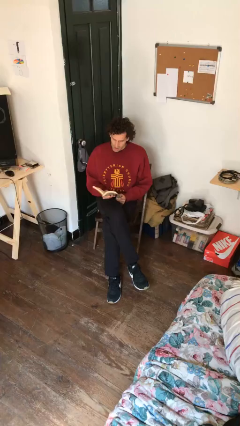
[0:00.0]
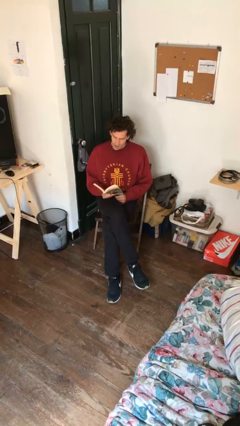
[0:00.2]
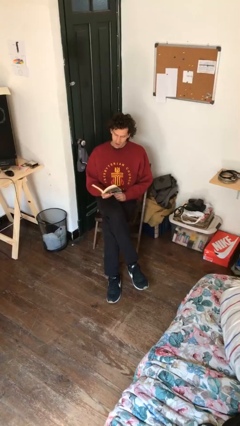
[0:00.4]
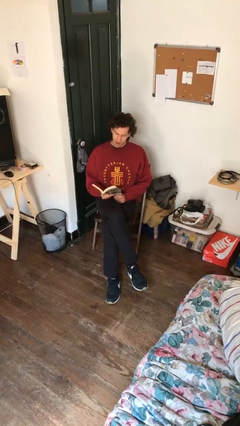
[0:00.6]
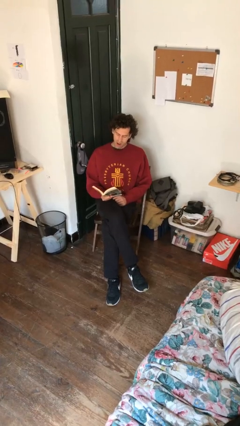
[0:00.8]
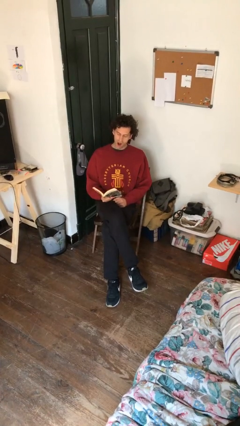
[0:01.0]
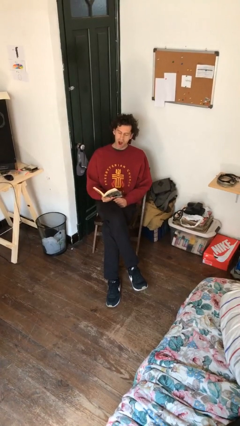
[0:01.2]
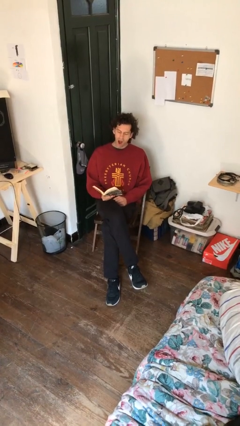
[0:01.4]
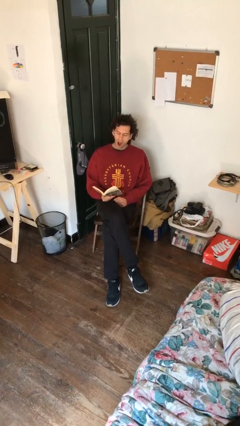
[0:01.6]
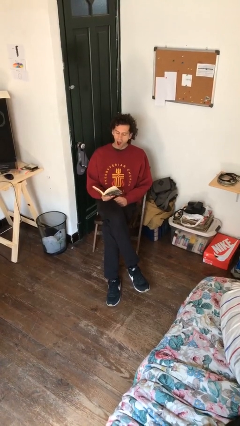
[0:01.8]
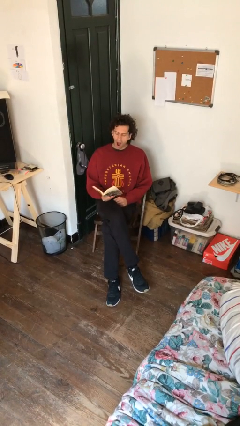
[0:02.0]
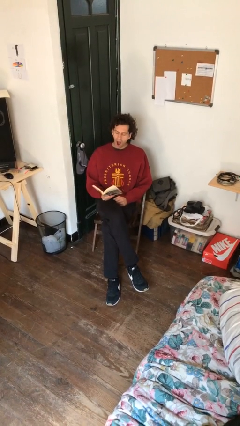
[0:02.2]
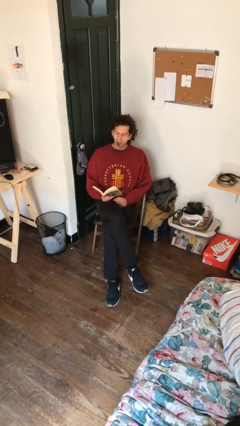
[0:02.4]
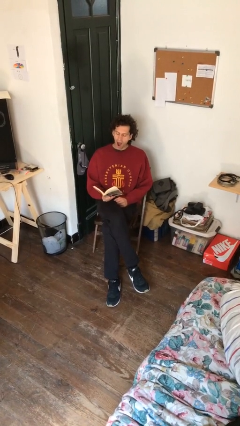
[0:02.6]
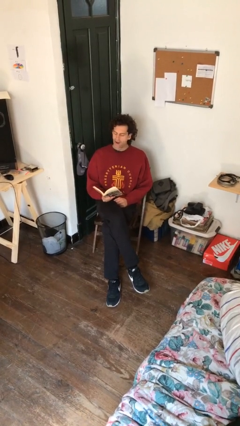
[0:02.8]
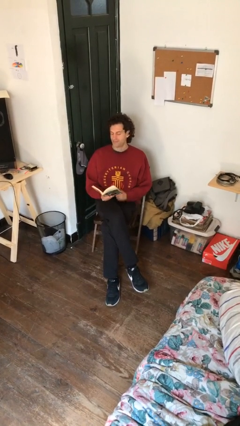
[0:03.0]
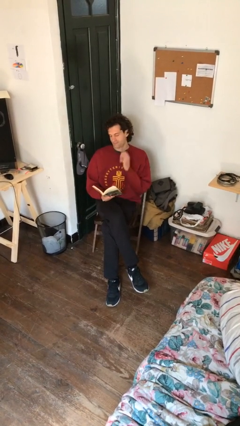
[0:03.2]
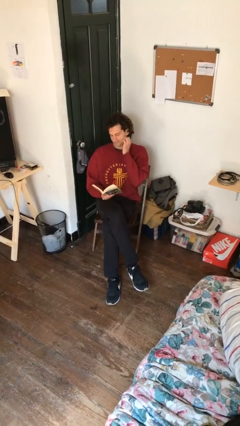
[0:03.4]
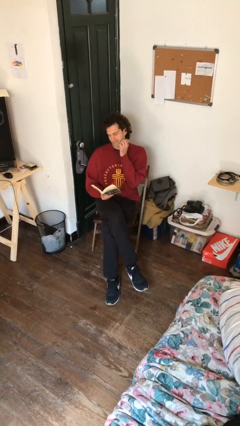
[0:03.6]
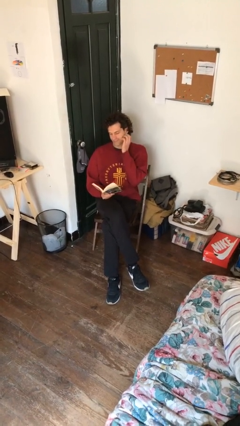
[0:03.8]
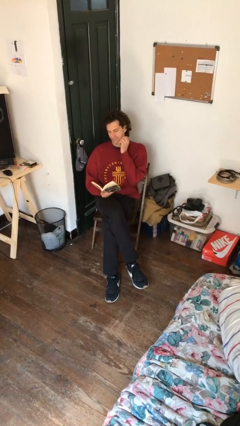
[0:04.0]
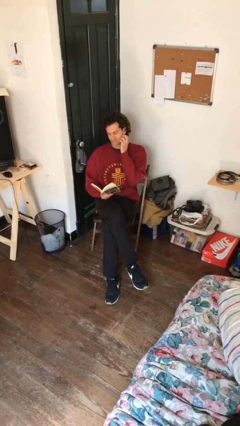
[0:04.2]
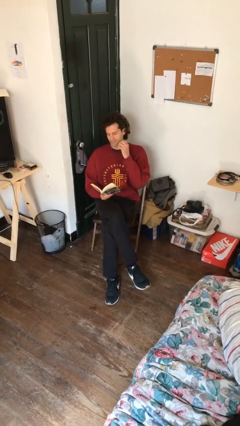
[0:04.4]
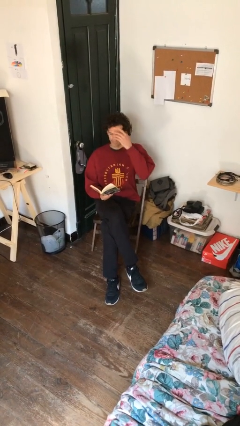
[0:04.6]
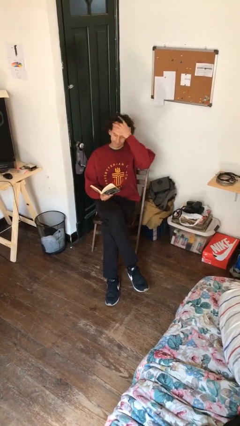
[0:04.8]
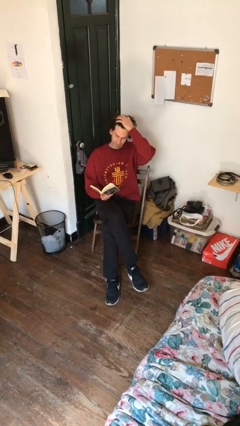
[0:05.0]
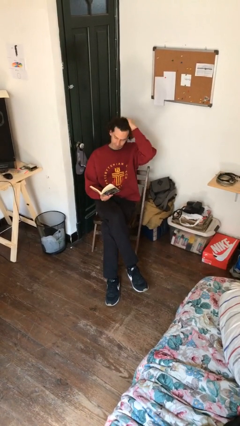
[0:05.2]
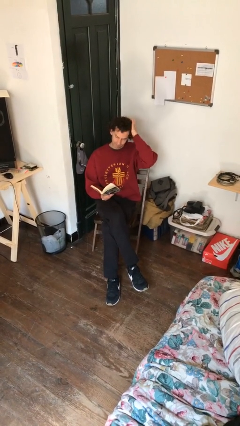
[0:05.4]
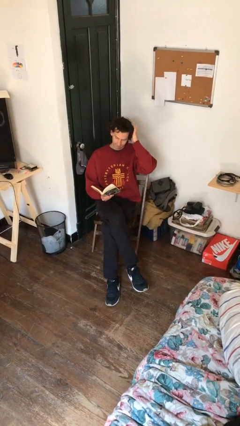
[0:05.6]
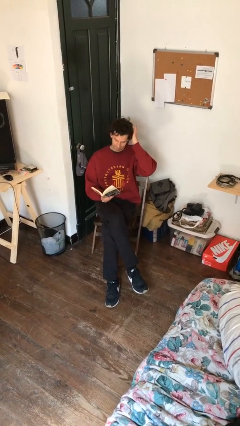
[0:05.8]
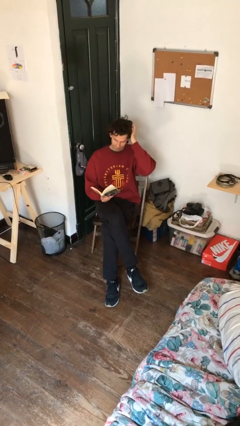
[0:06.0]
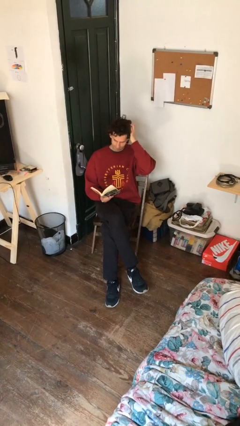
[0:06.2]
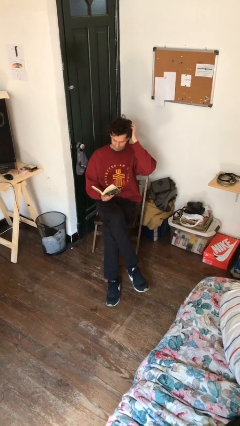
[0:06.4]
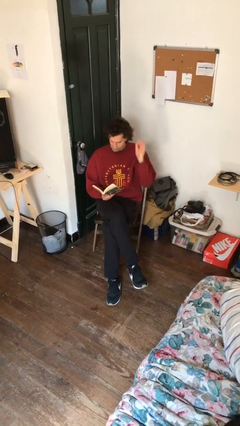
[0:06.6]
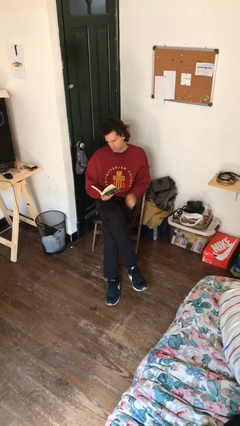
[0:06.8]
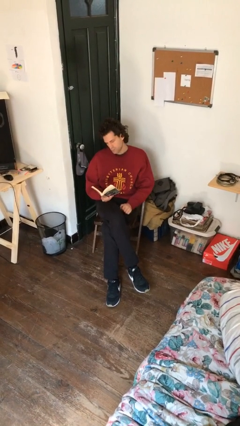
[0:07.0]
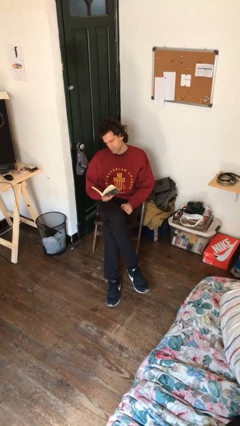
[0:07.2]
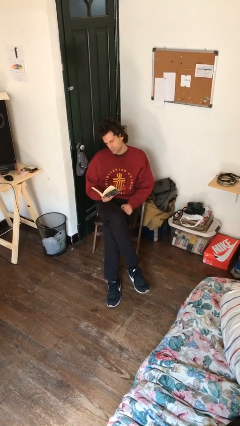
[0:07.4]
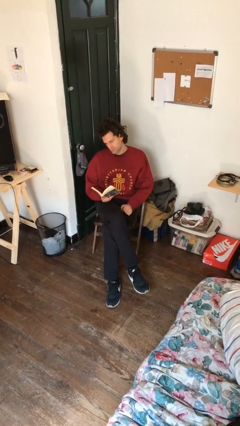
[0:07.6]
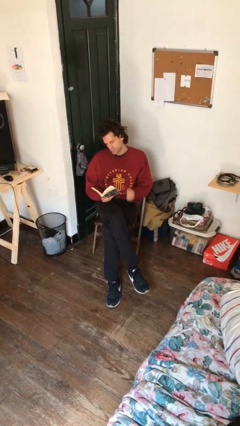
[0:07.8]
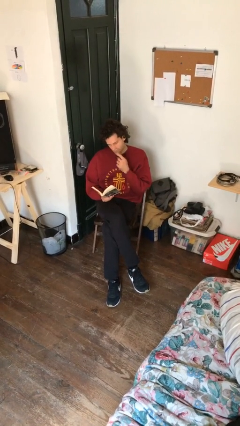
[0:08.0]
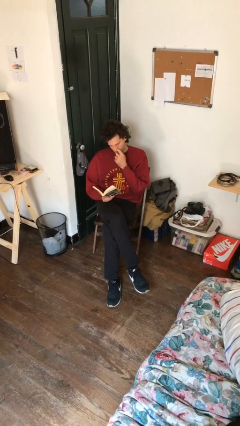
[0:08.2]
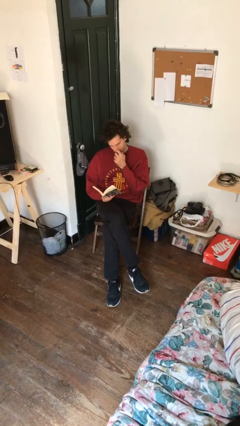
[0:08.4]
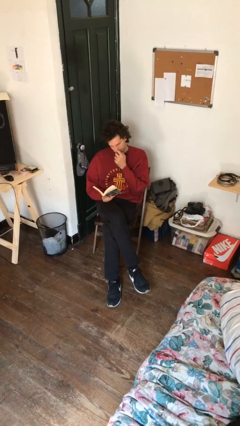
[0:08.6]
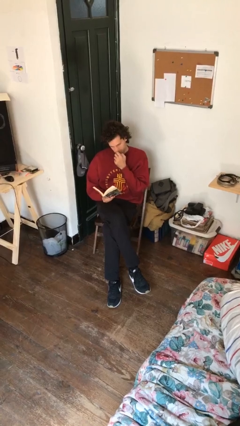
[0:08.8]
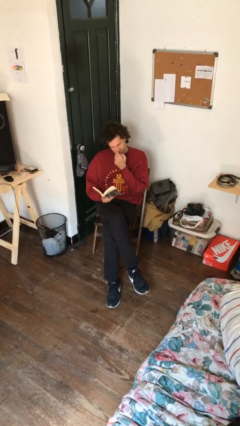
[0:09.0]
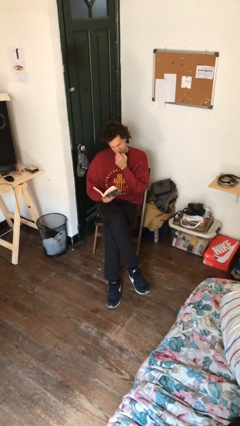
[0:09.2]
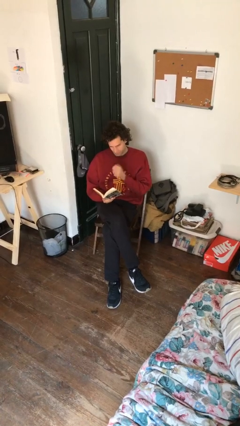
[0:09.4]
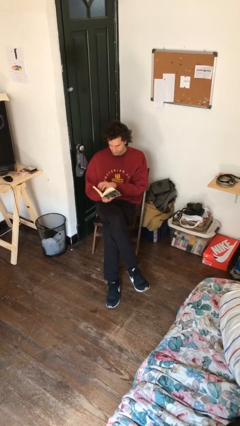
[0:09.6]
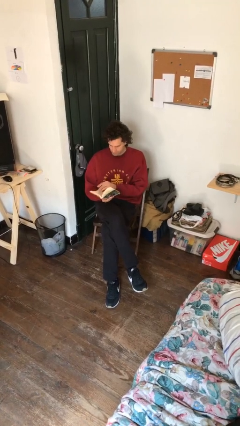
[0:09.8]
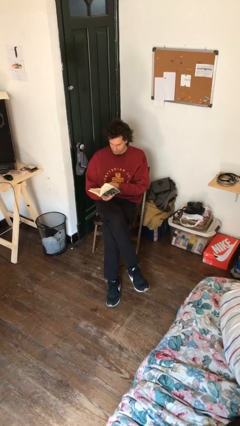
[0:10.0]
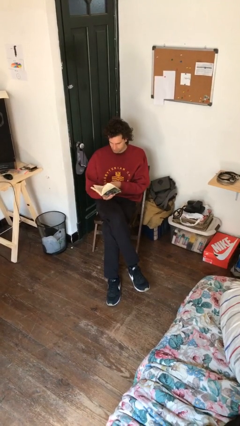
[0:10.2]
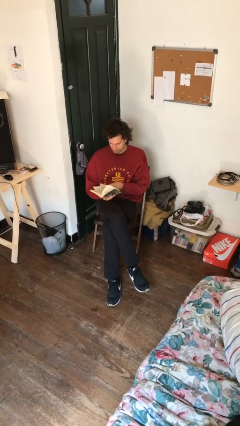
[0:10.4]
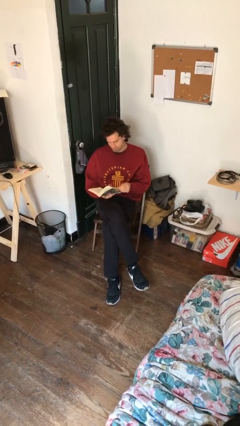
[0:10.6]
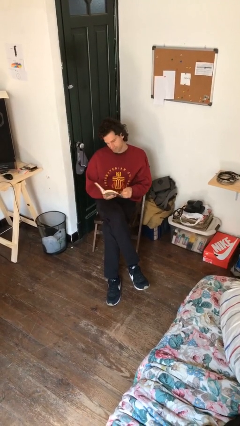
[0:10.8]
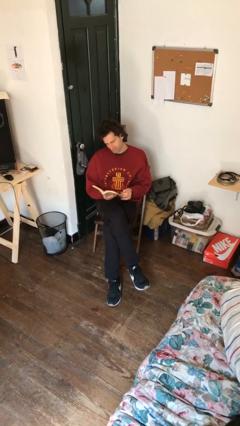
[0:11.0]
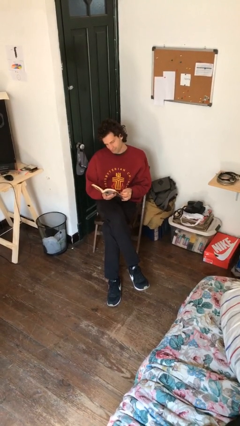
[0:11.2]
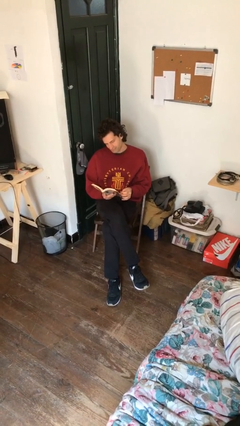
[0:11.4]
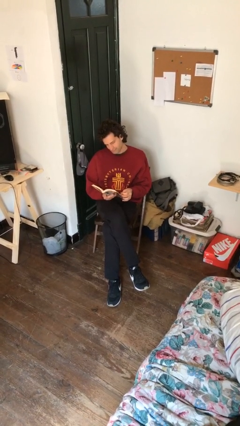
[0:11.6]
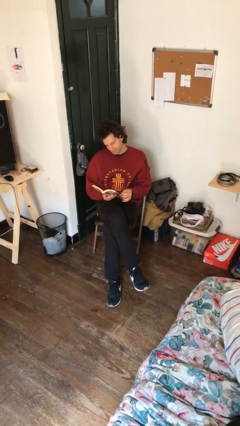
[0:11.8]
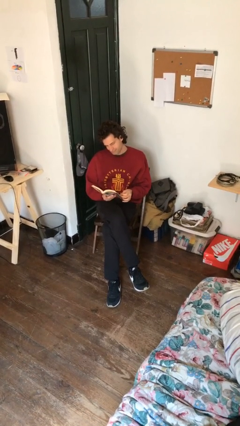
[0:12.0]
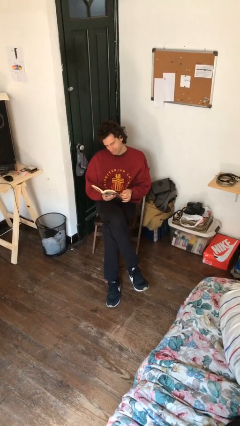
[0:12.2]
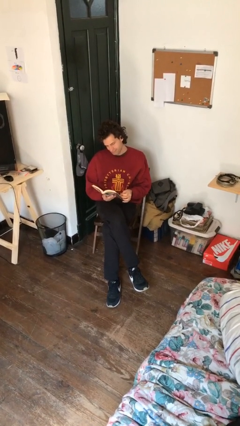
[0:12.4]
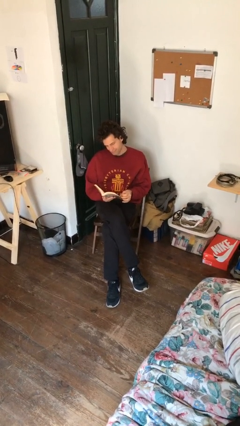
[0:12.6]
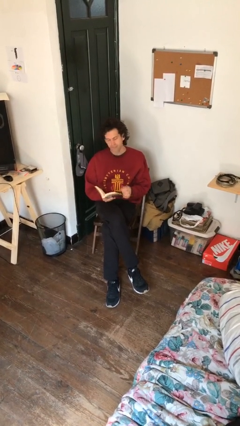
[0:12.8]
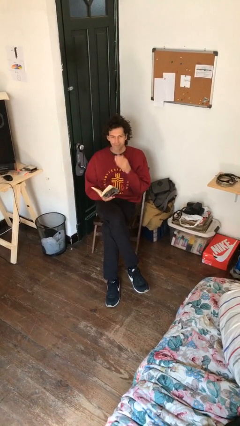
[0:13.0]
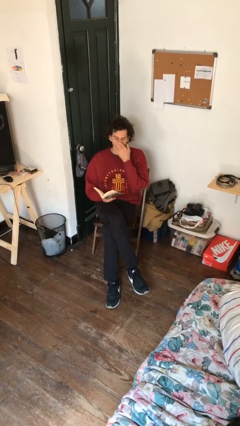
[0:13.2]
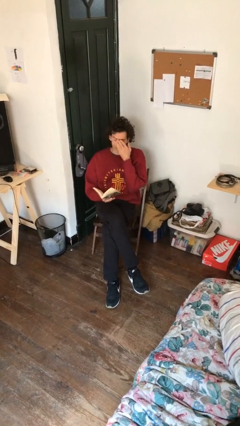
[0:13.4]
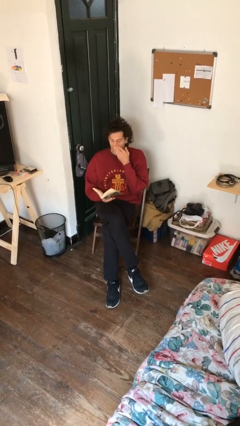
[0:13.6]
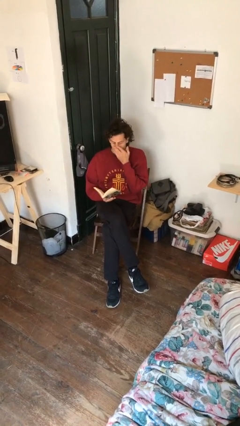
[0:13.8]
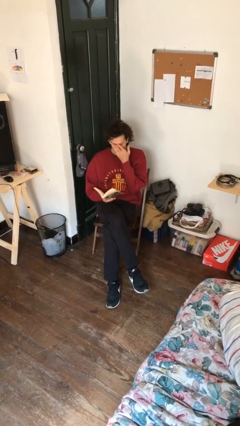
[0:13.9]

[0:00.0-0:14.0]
person reads document

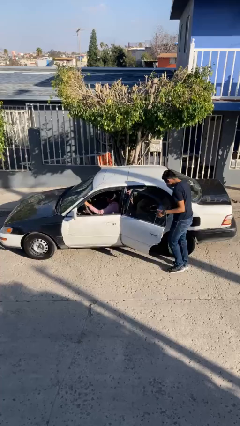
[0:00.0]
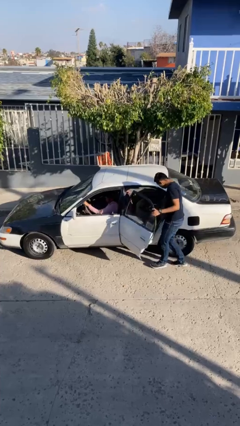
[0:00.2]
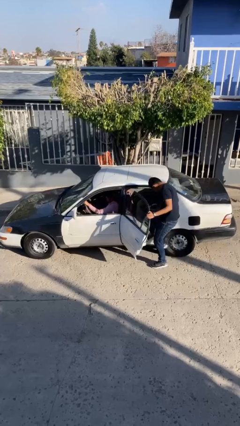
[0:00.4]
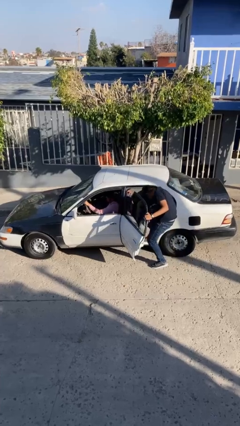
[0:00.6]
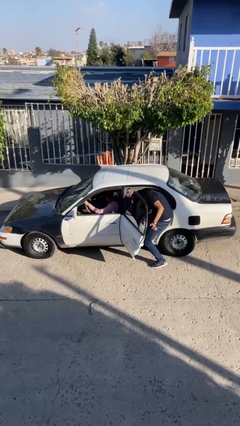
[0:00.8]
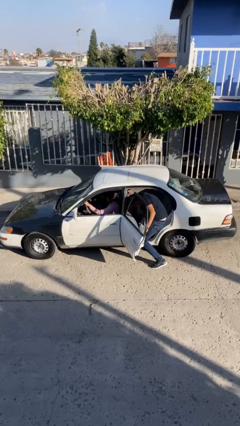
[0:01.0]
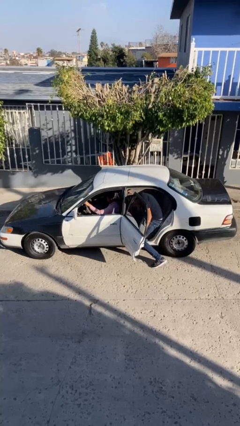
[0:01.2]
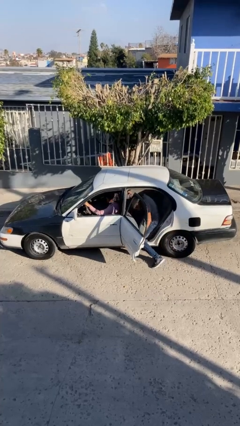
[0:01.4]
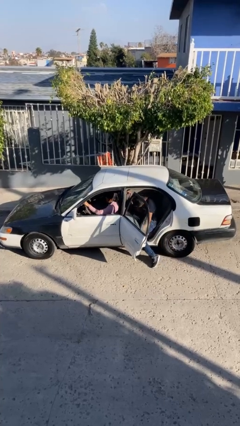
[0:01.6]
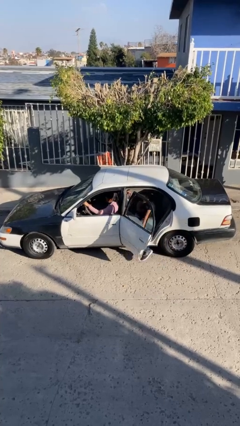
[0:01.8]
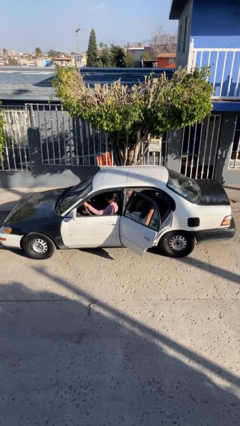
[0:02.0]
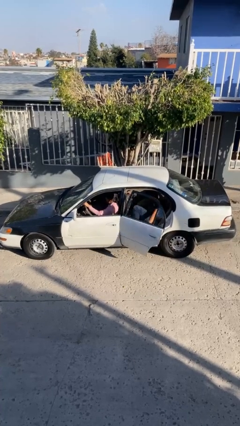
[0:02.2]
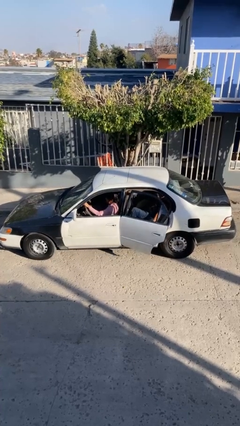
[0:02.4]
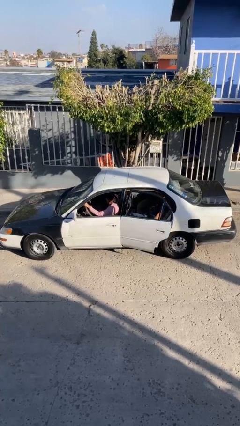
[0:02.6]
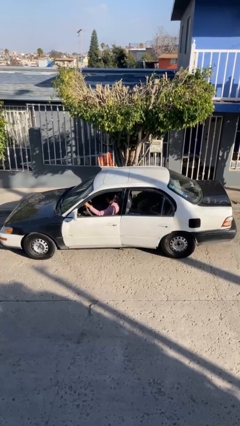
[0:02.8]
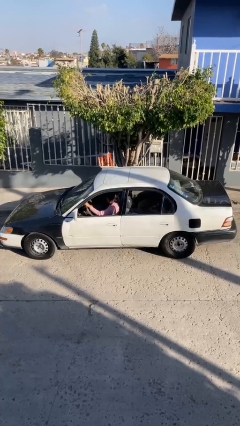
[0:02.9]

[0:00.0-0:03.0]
car picks up person

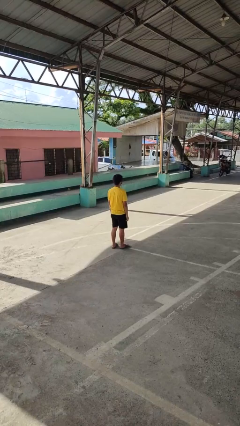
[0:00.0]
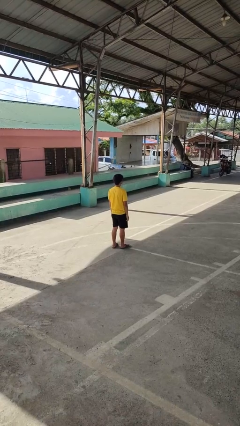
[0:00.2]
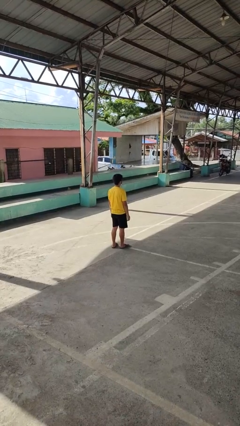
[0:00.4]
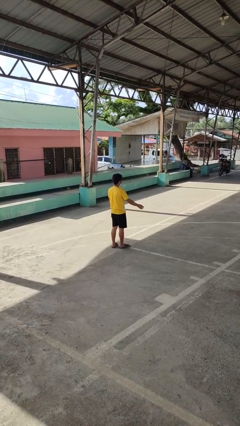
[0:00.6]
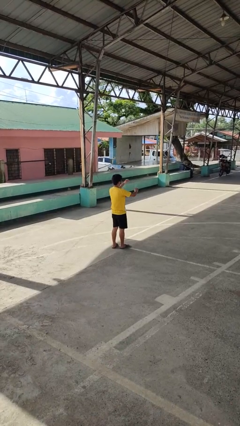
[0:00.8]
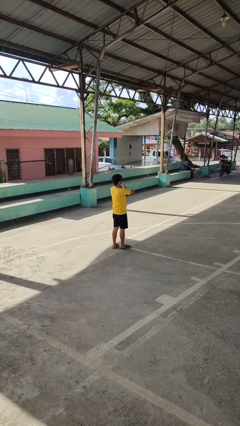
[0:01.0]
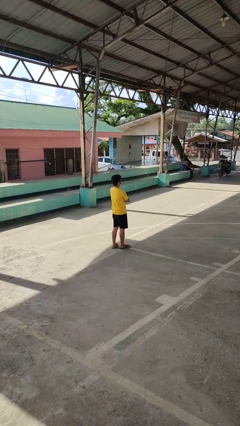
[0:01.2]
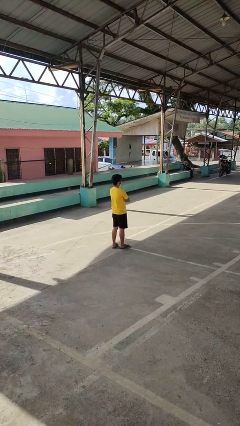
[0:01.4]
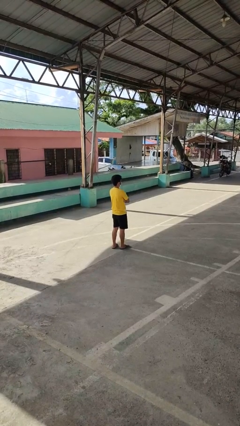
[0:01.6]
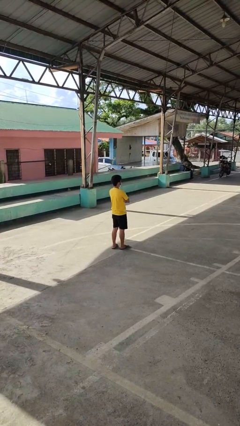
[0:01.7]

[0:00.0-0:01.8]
person crosses arms
